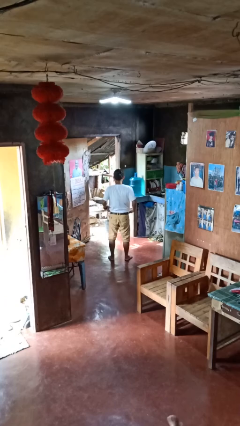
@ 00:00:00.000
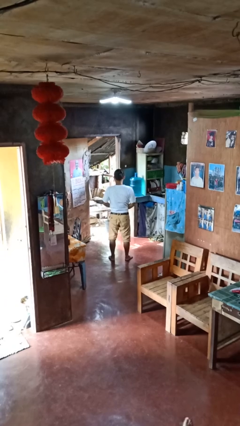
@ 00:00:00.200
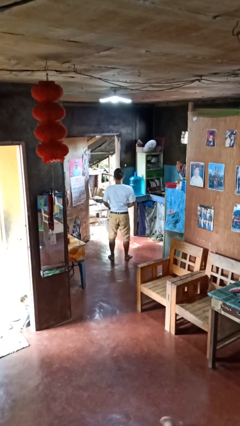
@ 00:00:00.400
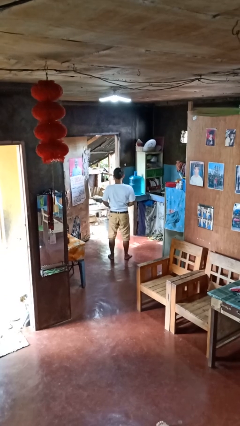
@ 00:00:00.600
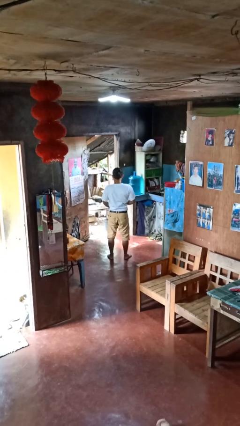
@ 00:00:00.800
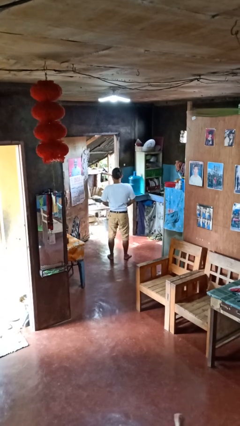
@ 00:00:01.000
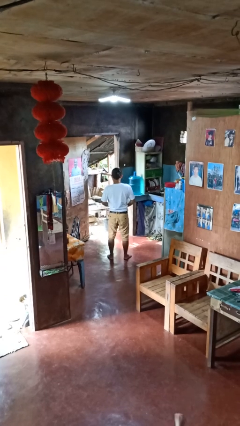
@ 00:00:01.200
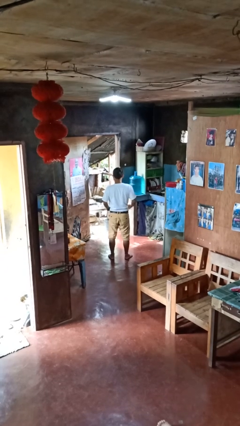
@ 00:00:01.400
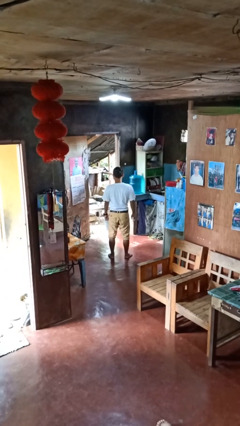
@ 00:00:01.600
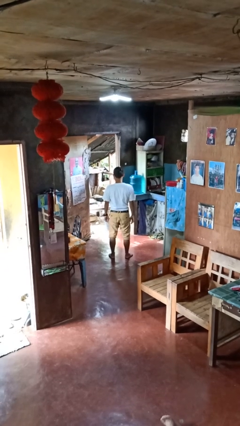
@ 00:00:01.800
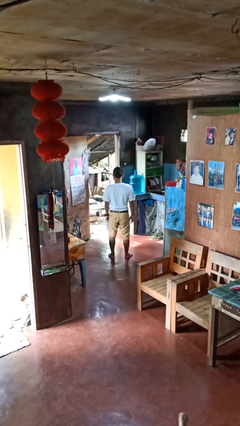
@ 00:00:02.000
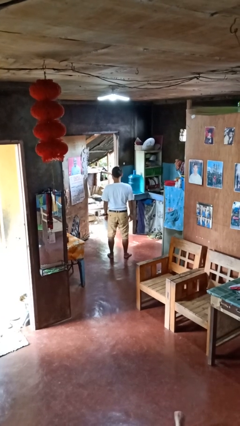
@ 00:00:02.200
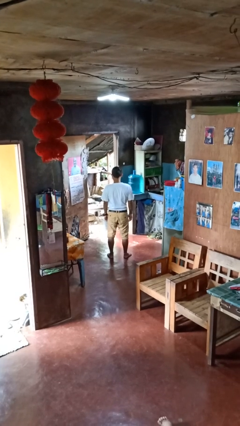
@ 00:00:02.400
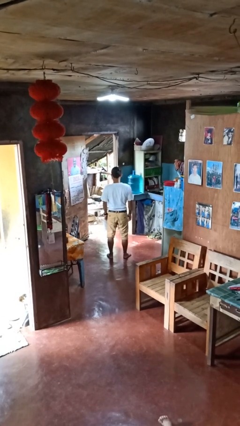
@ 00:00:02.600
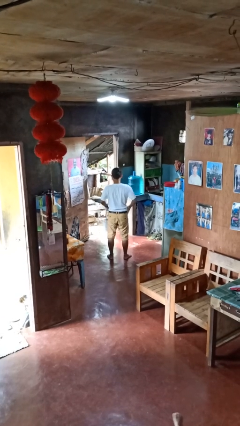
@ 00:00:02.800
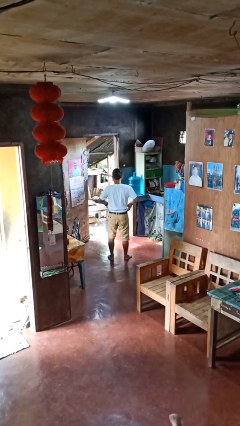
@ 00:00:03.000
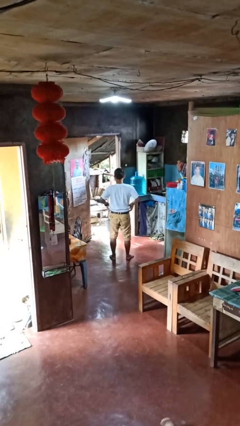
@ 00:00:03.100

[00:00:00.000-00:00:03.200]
person tucks in shirt

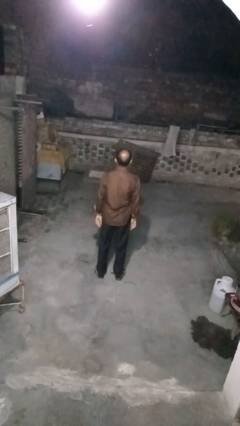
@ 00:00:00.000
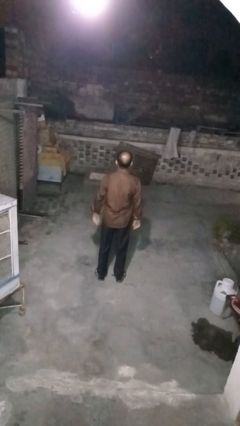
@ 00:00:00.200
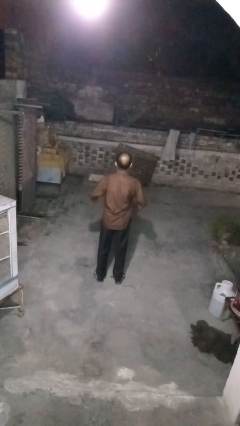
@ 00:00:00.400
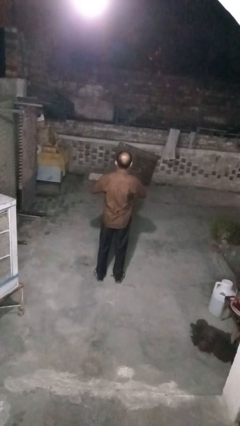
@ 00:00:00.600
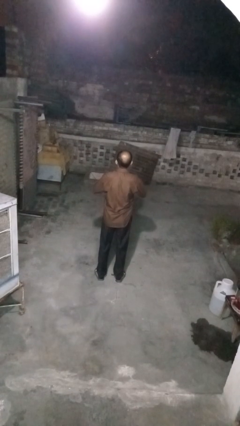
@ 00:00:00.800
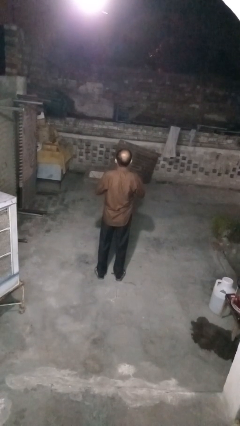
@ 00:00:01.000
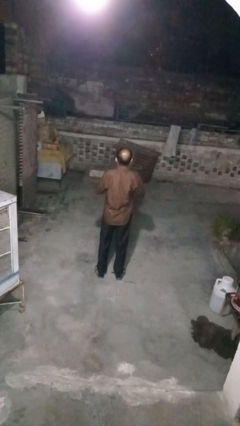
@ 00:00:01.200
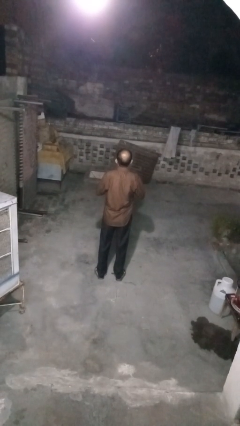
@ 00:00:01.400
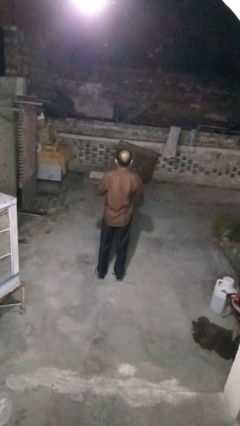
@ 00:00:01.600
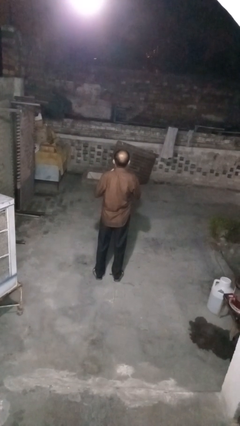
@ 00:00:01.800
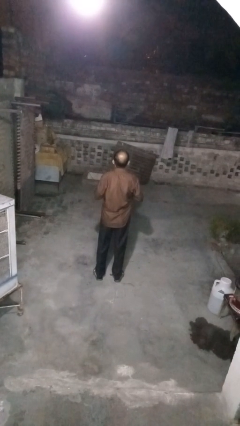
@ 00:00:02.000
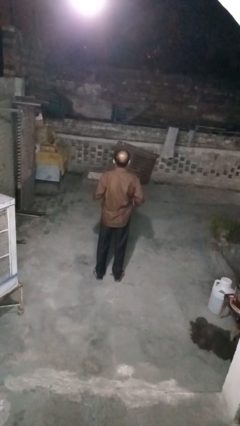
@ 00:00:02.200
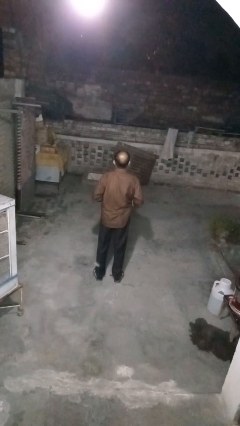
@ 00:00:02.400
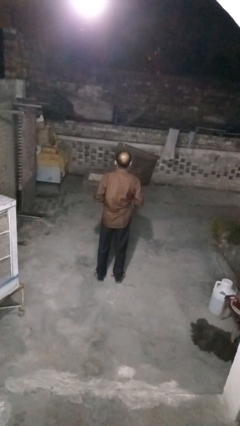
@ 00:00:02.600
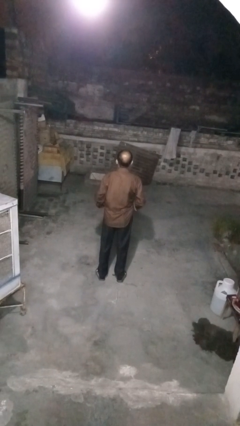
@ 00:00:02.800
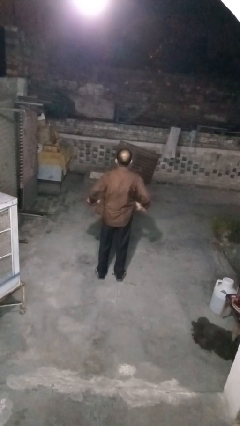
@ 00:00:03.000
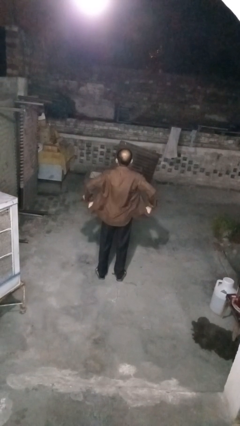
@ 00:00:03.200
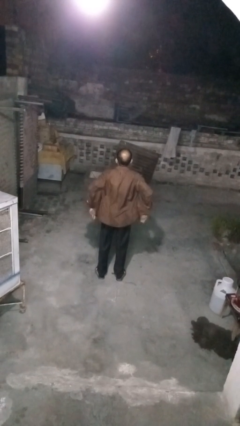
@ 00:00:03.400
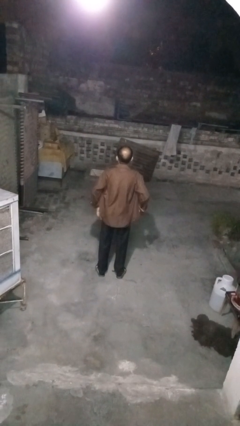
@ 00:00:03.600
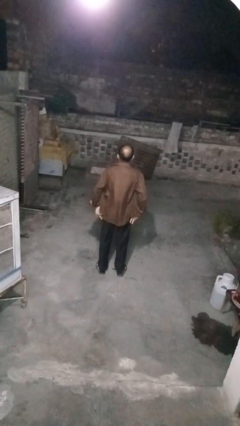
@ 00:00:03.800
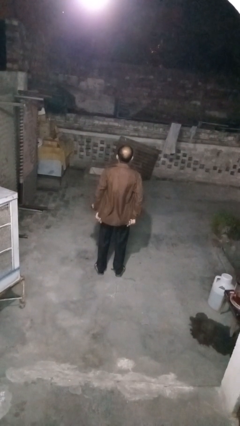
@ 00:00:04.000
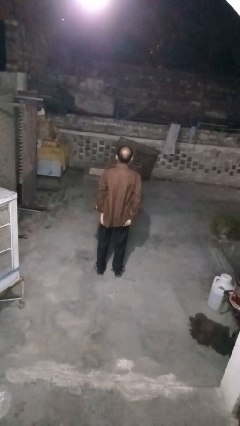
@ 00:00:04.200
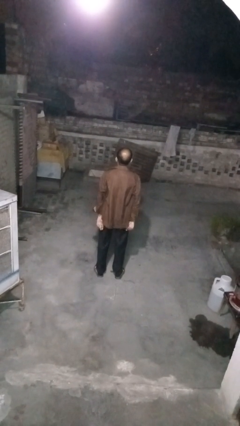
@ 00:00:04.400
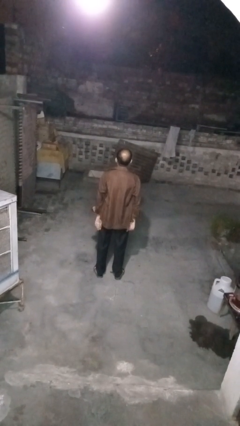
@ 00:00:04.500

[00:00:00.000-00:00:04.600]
person unbuttons shirt

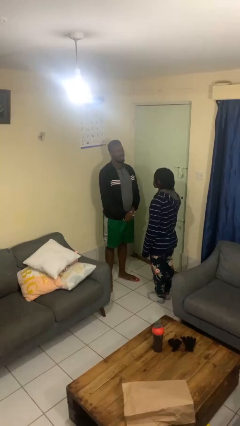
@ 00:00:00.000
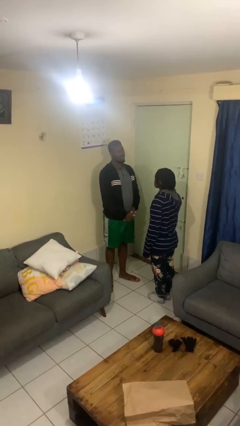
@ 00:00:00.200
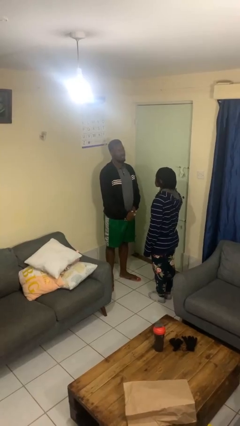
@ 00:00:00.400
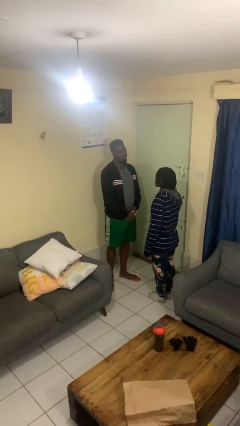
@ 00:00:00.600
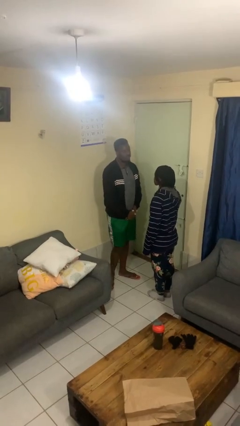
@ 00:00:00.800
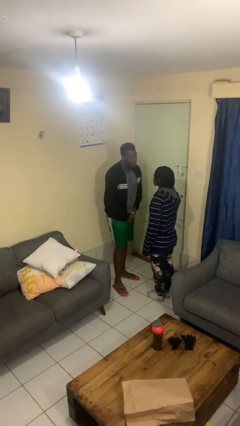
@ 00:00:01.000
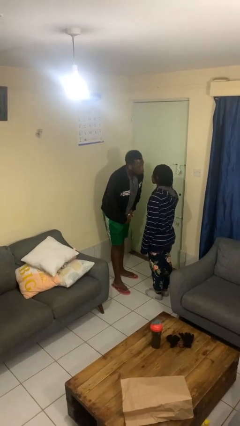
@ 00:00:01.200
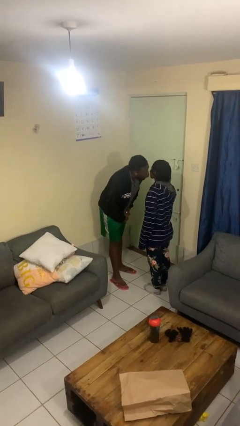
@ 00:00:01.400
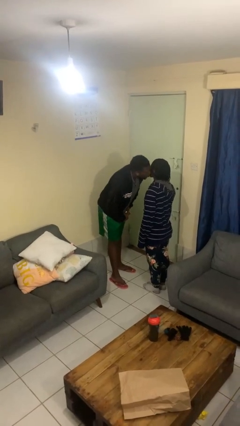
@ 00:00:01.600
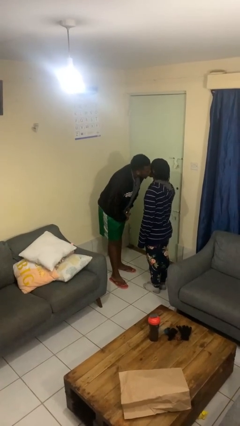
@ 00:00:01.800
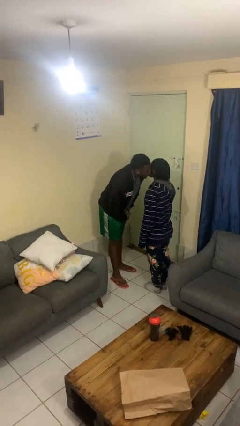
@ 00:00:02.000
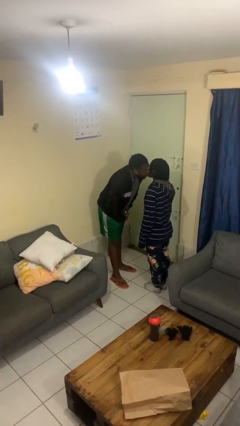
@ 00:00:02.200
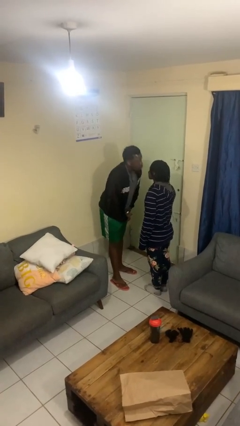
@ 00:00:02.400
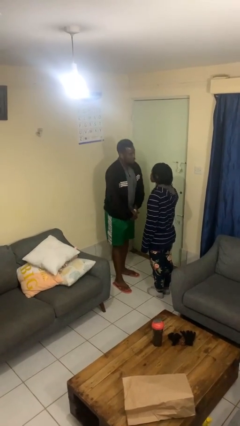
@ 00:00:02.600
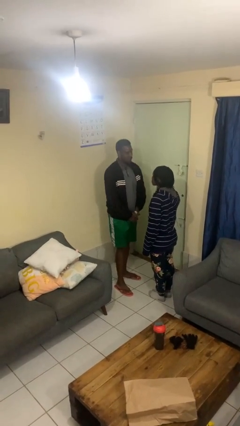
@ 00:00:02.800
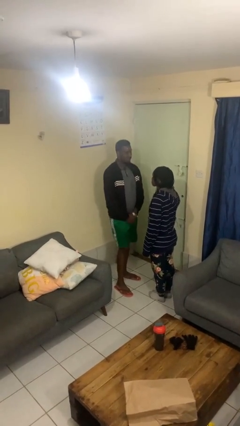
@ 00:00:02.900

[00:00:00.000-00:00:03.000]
person kisses cheek of person

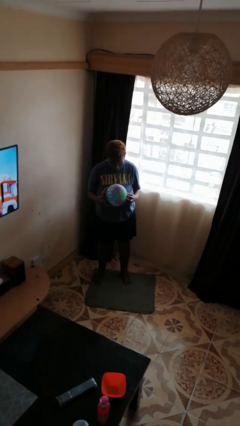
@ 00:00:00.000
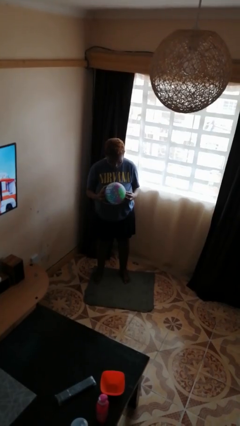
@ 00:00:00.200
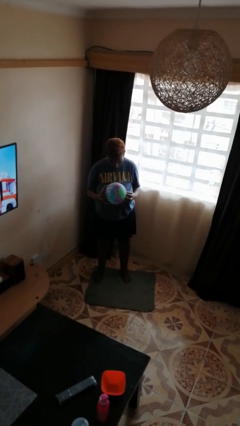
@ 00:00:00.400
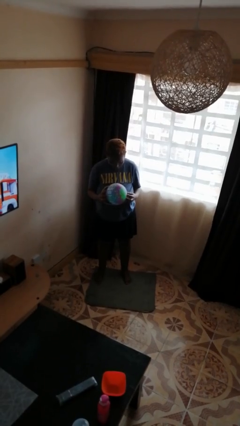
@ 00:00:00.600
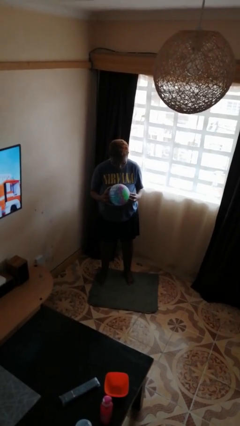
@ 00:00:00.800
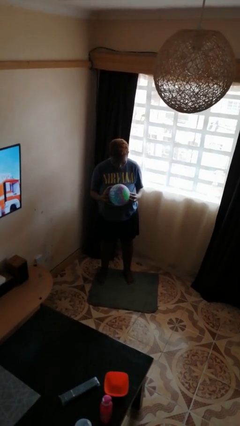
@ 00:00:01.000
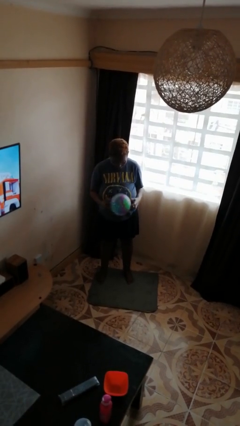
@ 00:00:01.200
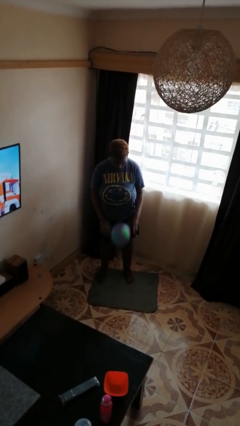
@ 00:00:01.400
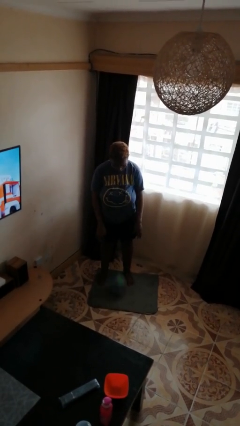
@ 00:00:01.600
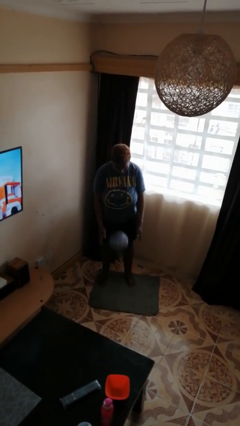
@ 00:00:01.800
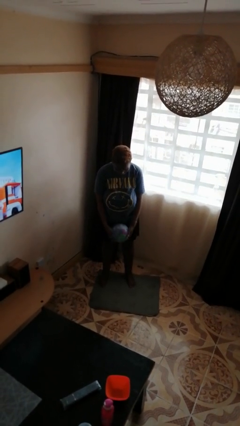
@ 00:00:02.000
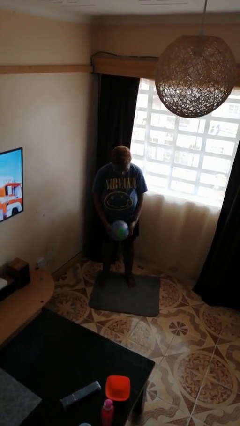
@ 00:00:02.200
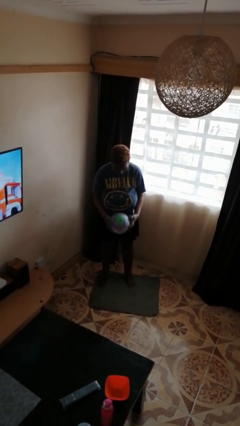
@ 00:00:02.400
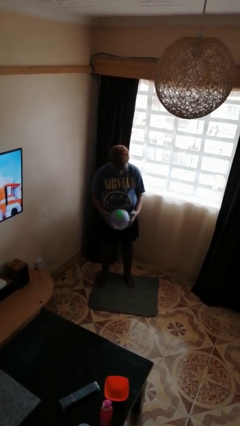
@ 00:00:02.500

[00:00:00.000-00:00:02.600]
person bounces ball on floor

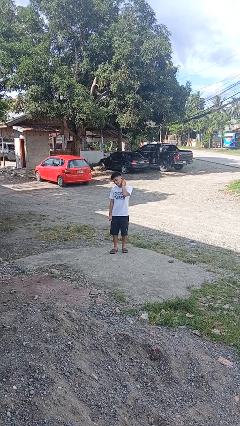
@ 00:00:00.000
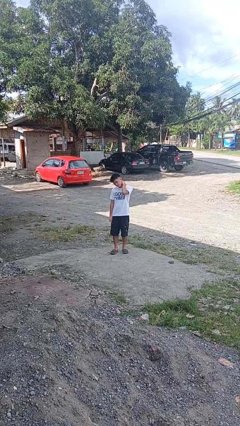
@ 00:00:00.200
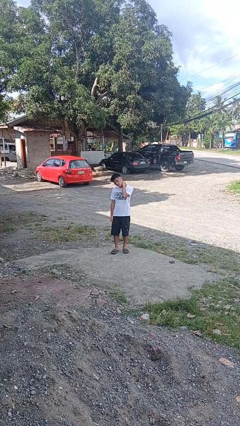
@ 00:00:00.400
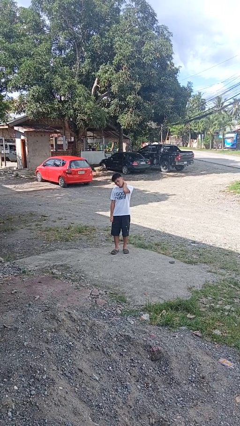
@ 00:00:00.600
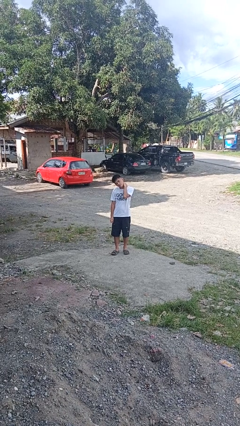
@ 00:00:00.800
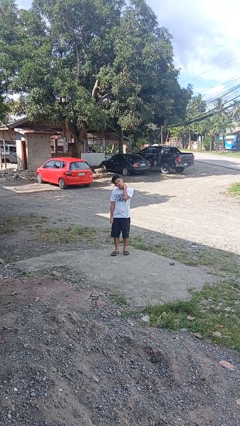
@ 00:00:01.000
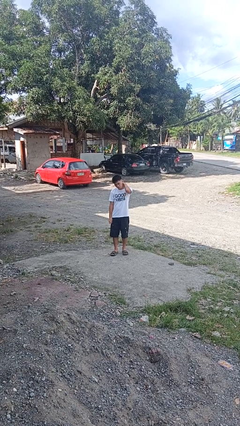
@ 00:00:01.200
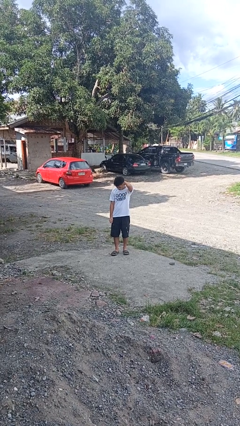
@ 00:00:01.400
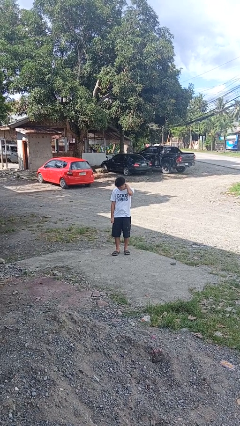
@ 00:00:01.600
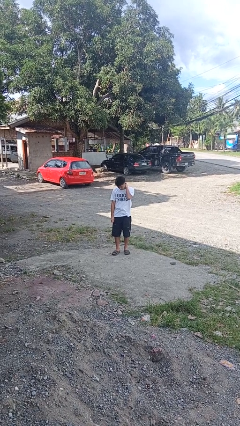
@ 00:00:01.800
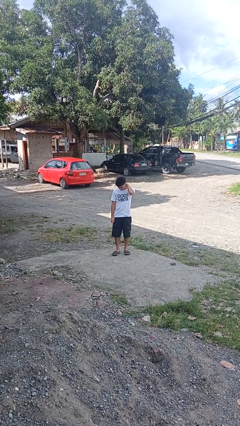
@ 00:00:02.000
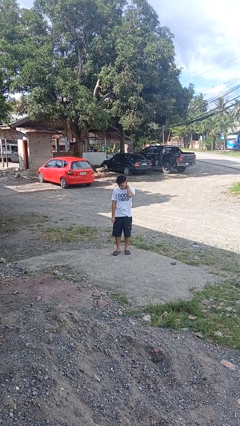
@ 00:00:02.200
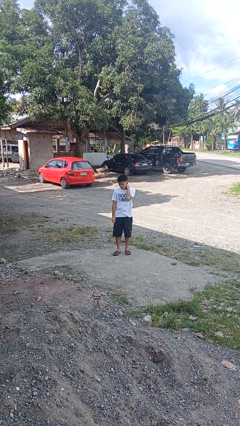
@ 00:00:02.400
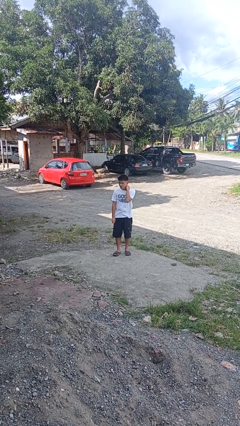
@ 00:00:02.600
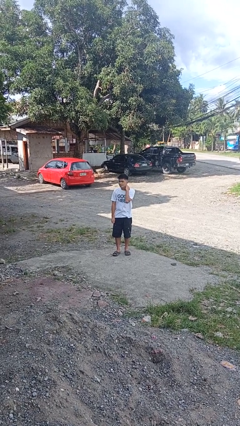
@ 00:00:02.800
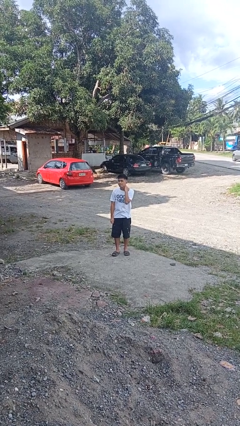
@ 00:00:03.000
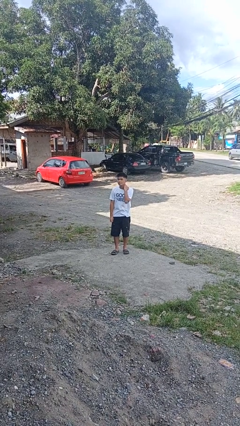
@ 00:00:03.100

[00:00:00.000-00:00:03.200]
person rubs neck

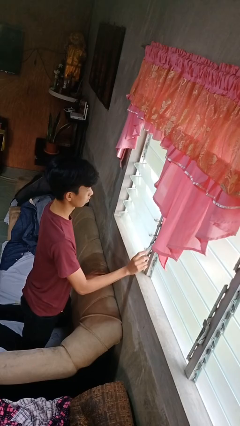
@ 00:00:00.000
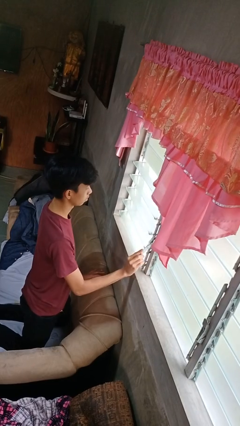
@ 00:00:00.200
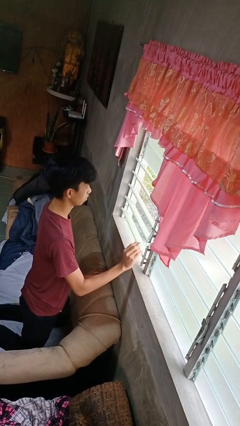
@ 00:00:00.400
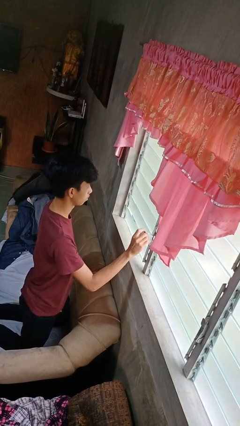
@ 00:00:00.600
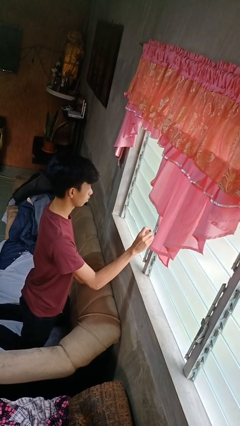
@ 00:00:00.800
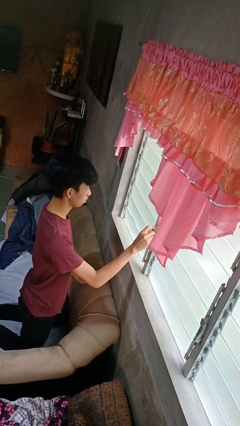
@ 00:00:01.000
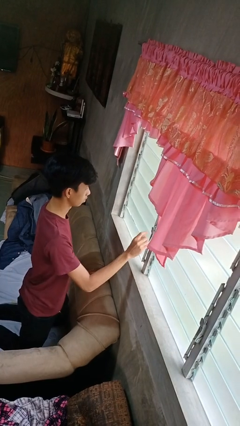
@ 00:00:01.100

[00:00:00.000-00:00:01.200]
person closes home window
